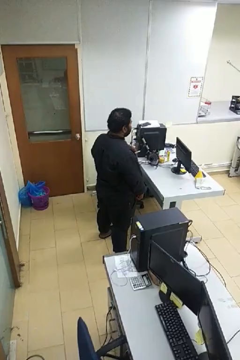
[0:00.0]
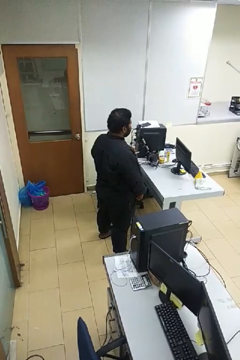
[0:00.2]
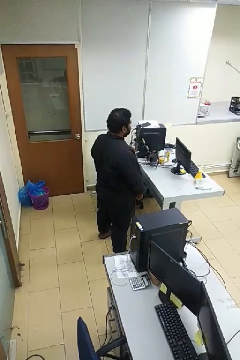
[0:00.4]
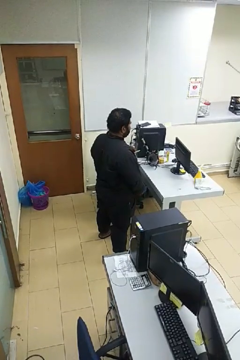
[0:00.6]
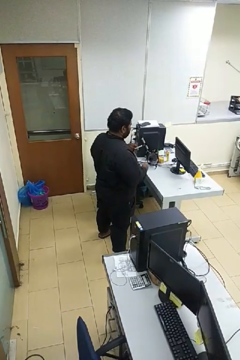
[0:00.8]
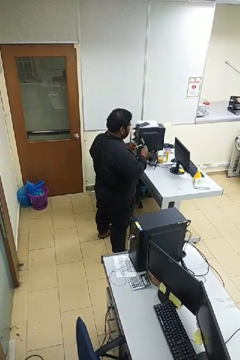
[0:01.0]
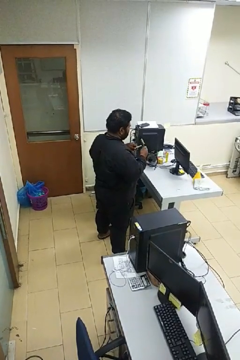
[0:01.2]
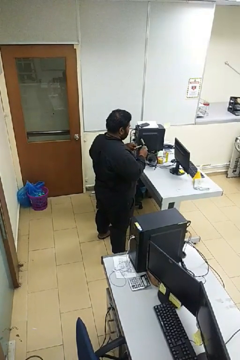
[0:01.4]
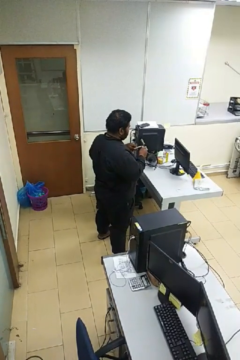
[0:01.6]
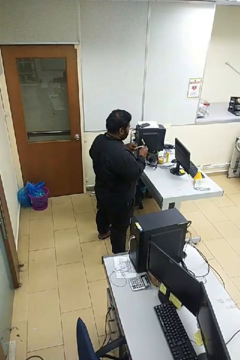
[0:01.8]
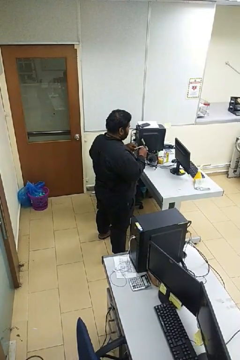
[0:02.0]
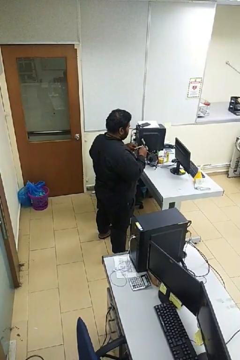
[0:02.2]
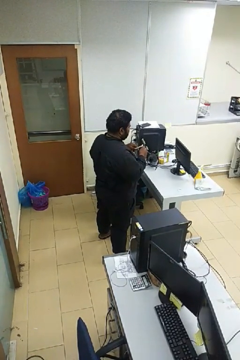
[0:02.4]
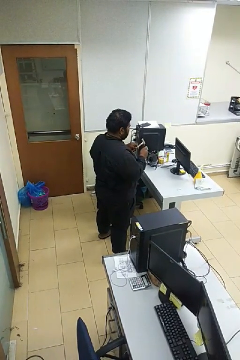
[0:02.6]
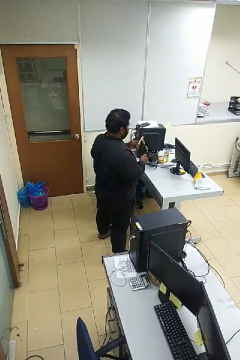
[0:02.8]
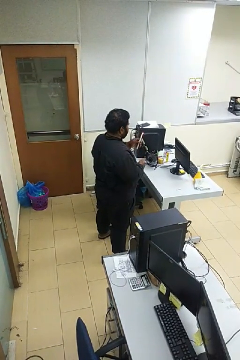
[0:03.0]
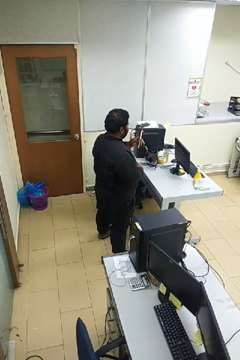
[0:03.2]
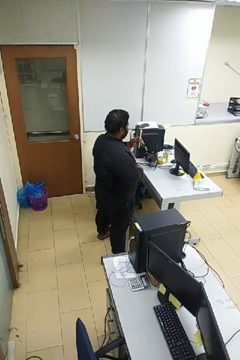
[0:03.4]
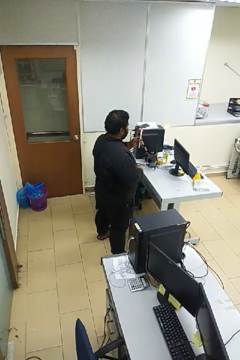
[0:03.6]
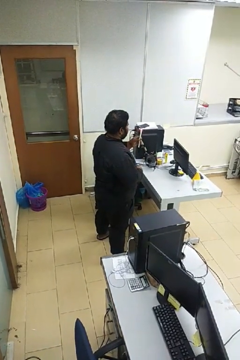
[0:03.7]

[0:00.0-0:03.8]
person lights candle

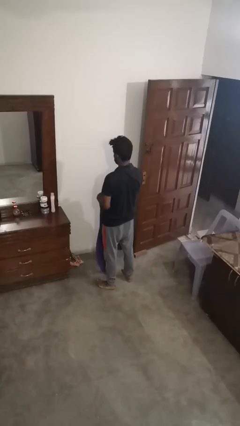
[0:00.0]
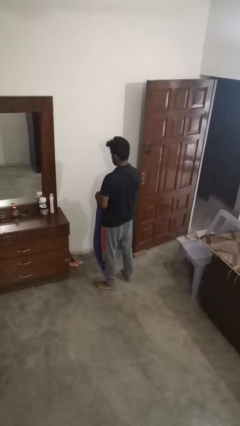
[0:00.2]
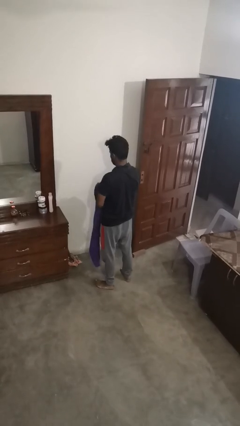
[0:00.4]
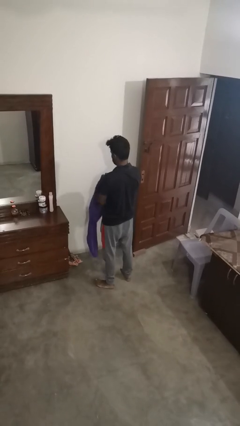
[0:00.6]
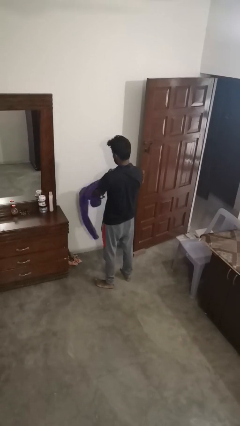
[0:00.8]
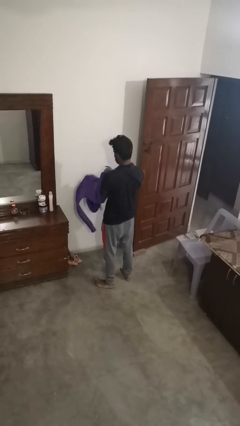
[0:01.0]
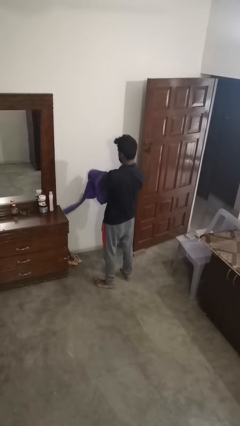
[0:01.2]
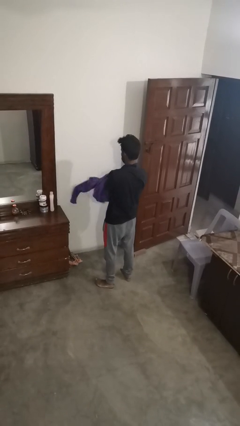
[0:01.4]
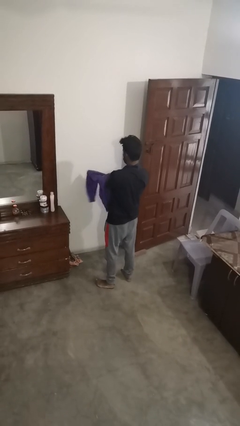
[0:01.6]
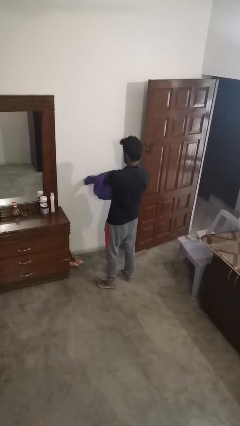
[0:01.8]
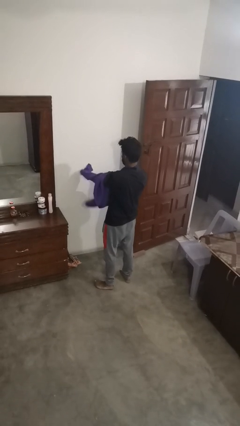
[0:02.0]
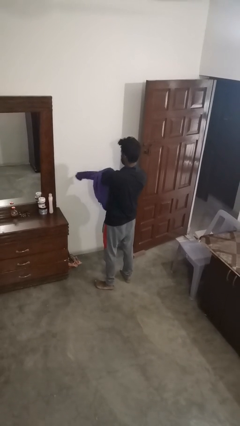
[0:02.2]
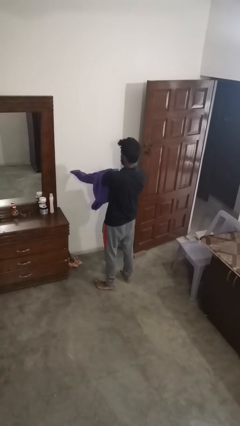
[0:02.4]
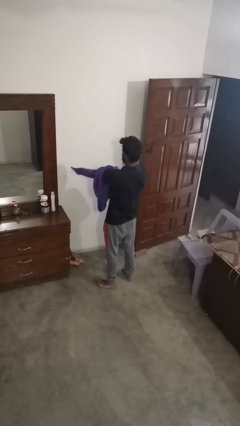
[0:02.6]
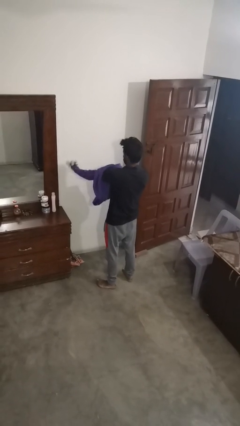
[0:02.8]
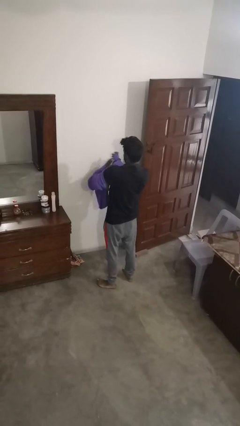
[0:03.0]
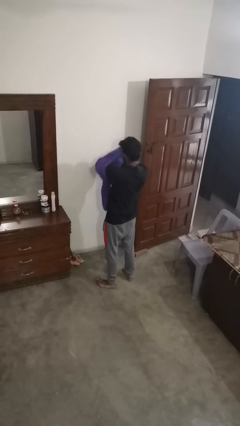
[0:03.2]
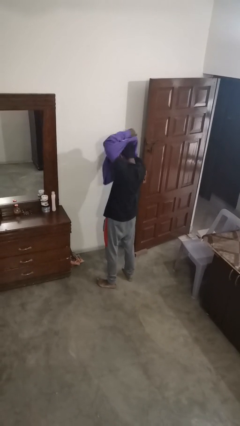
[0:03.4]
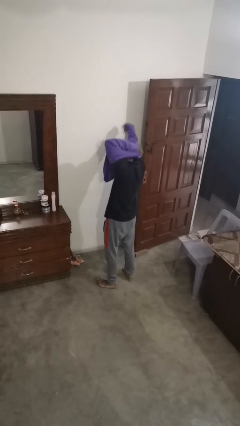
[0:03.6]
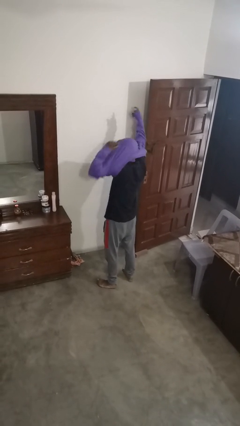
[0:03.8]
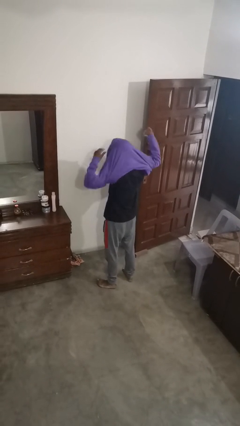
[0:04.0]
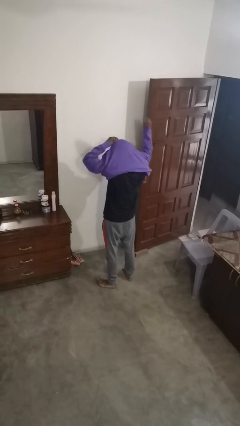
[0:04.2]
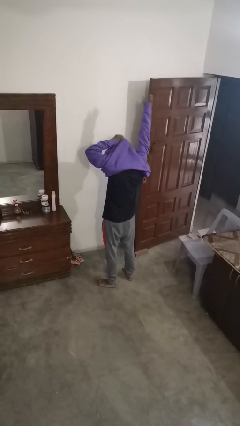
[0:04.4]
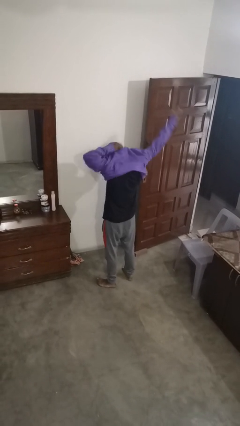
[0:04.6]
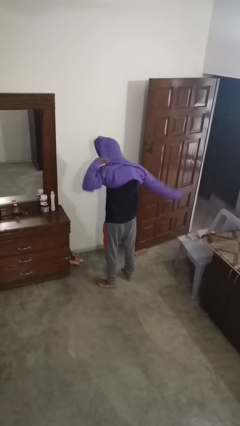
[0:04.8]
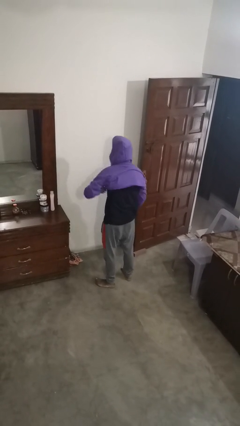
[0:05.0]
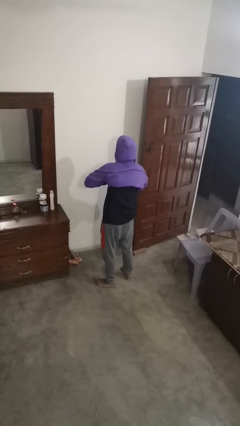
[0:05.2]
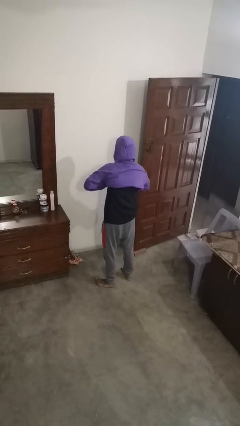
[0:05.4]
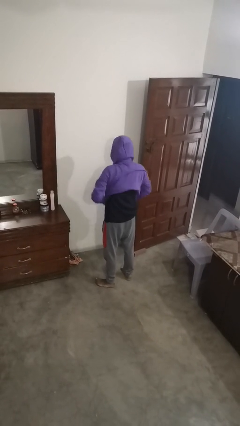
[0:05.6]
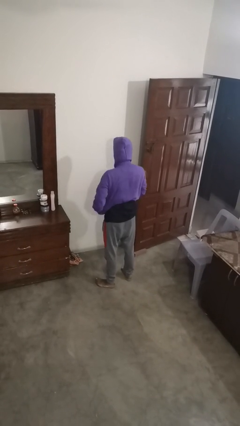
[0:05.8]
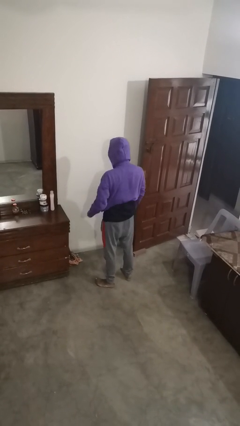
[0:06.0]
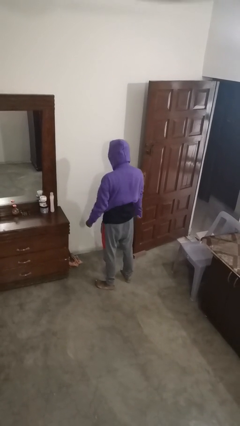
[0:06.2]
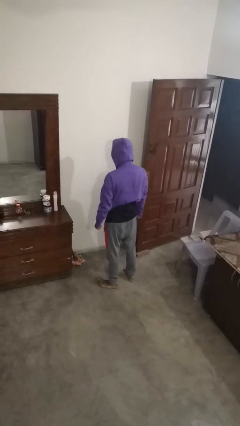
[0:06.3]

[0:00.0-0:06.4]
person puts on hoodie

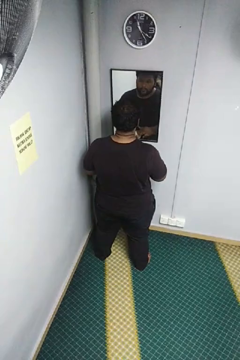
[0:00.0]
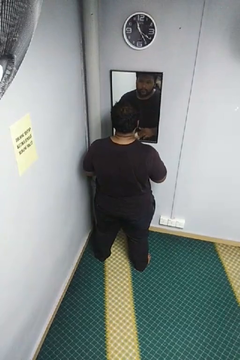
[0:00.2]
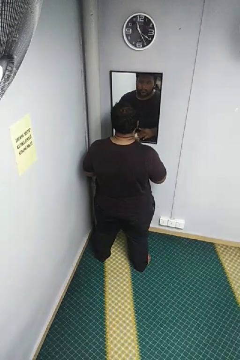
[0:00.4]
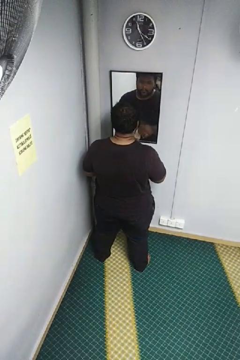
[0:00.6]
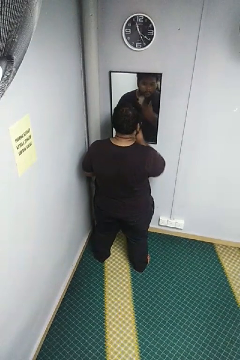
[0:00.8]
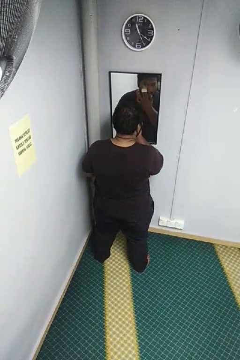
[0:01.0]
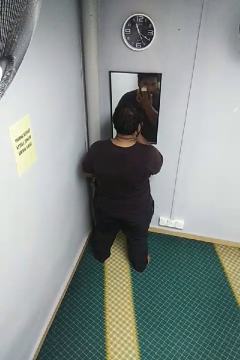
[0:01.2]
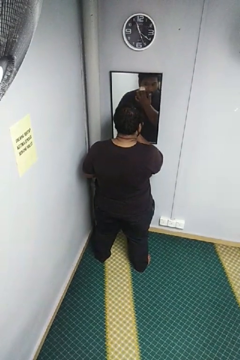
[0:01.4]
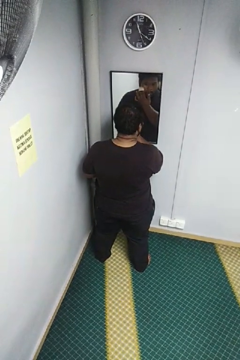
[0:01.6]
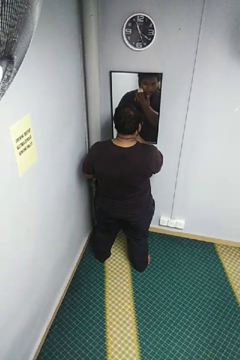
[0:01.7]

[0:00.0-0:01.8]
person applies foundation makeup

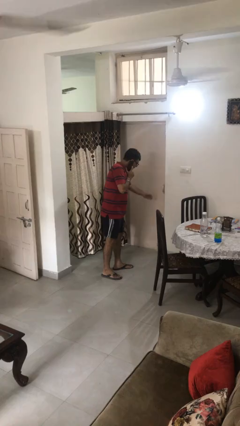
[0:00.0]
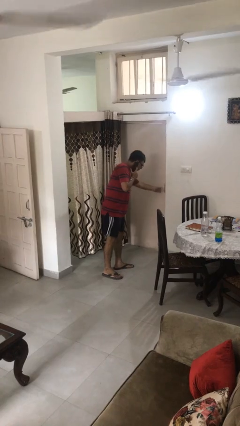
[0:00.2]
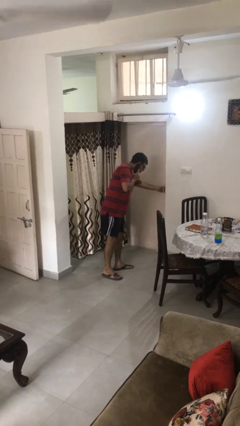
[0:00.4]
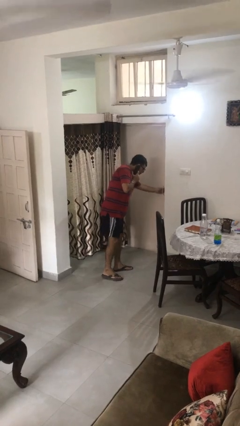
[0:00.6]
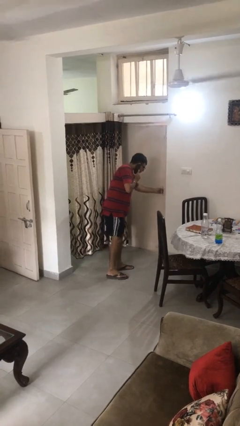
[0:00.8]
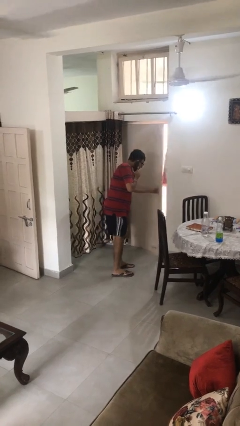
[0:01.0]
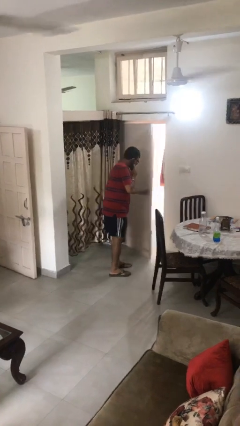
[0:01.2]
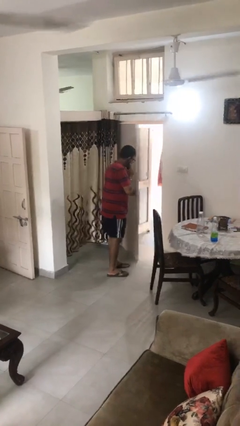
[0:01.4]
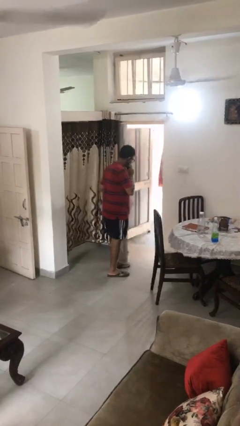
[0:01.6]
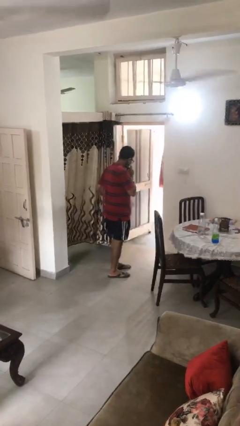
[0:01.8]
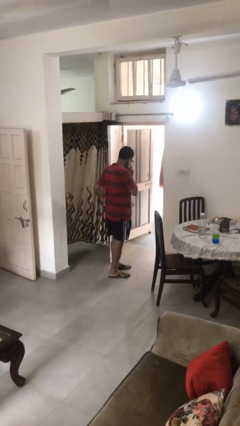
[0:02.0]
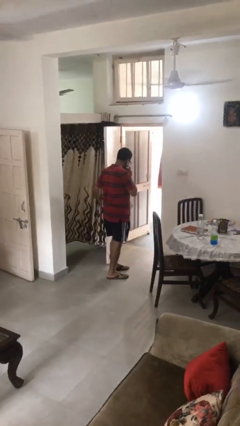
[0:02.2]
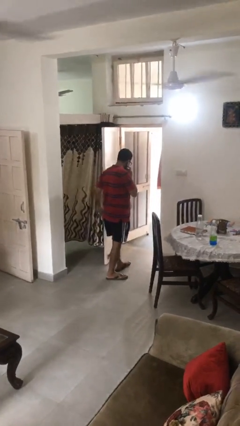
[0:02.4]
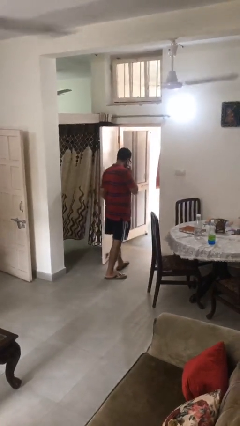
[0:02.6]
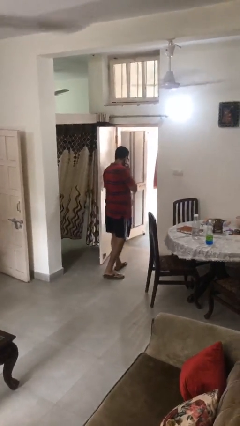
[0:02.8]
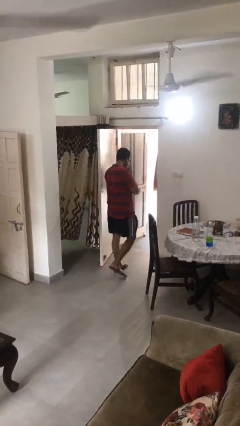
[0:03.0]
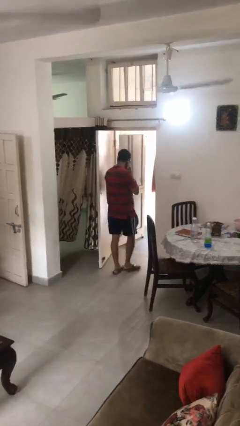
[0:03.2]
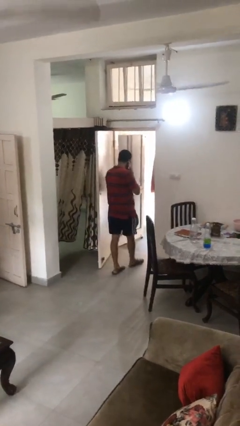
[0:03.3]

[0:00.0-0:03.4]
person opens facility door

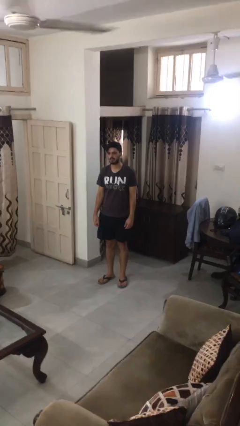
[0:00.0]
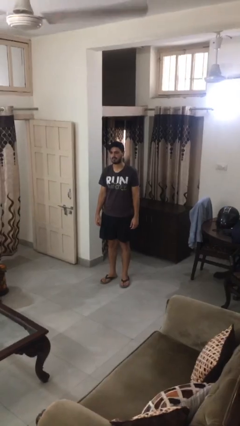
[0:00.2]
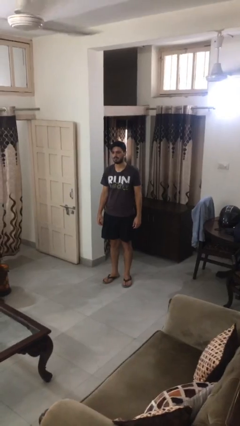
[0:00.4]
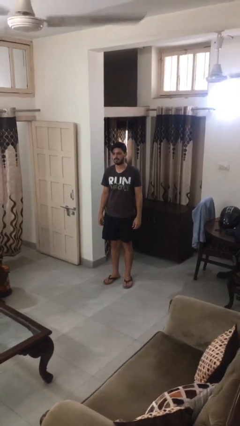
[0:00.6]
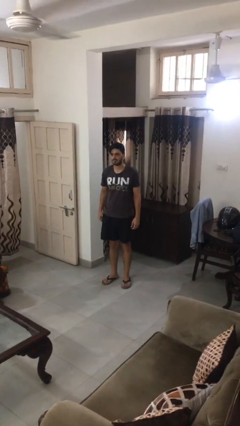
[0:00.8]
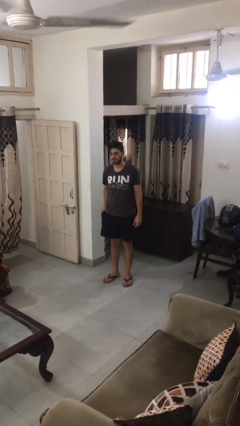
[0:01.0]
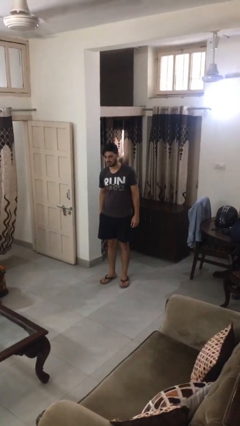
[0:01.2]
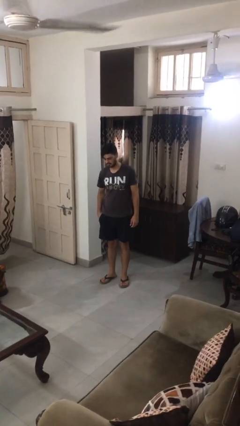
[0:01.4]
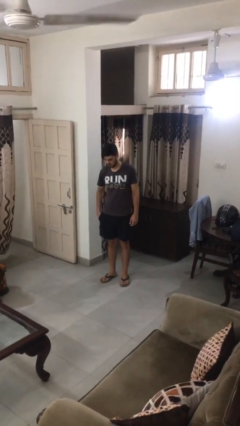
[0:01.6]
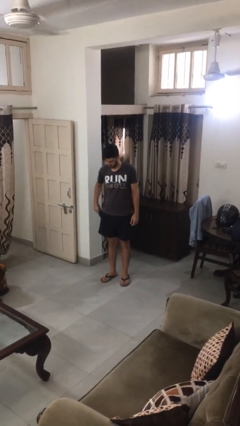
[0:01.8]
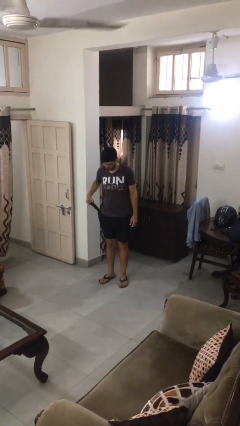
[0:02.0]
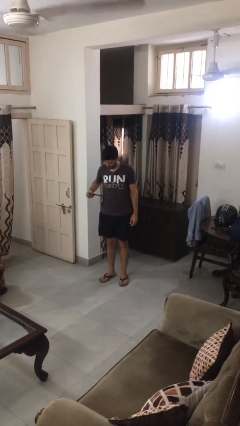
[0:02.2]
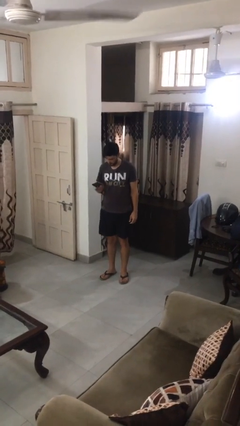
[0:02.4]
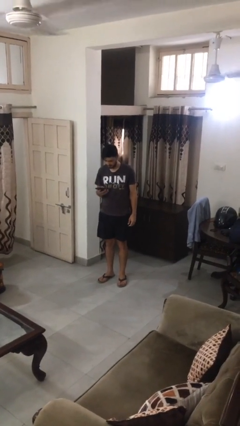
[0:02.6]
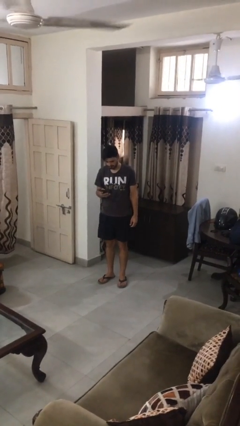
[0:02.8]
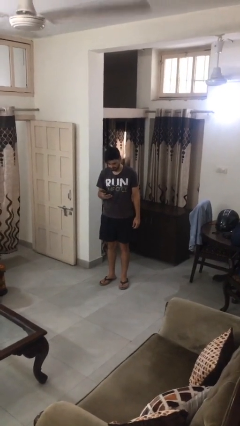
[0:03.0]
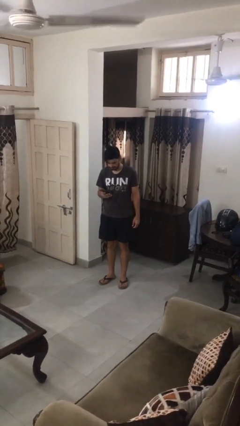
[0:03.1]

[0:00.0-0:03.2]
person takes phone from pocket

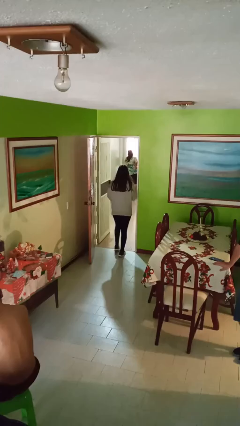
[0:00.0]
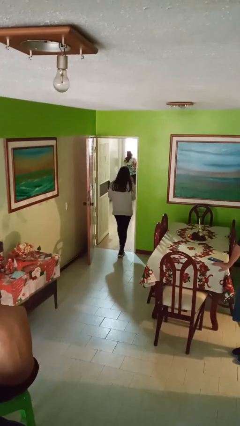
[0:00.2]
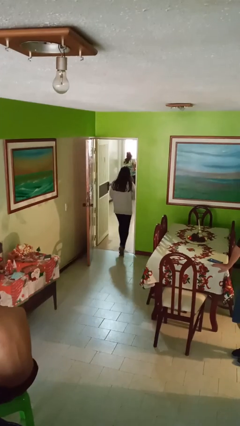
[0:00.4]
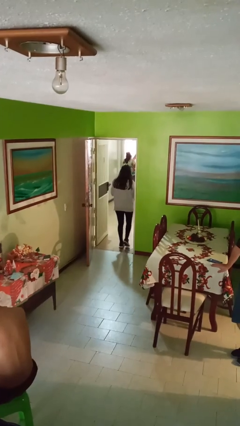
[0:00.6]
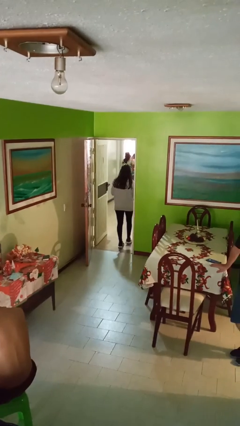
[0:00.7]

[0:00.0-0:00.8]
person exits scene through structure
